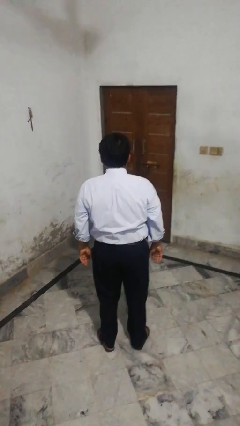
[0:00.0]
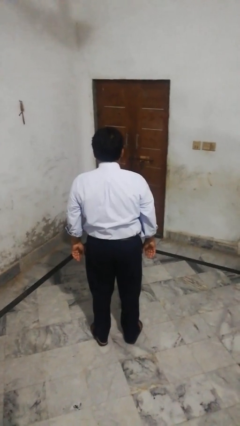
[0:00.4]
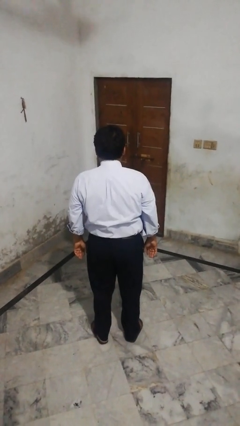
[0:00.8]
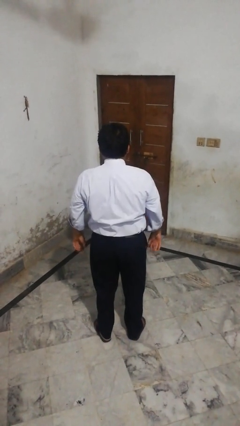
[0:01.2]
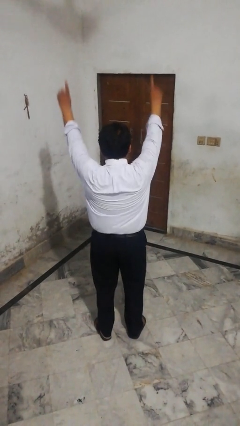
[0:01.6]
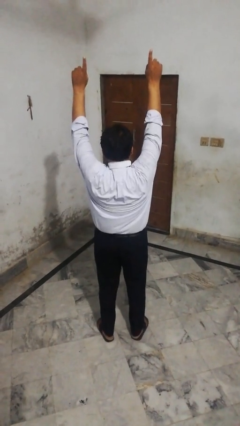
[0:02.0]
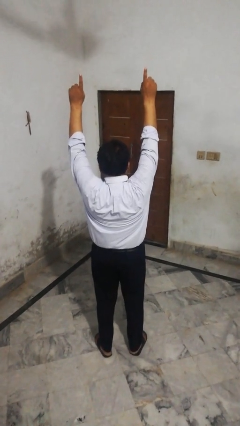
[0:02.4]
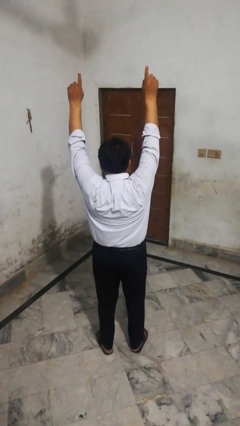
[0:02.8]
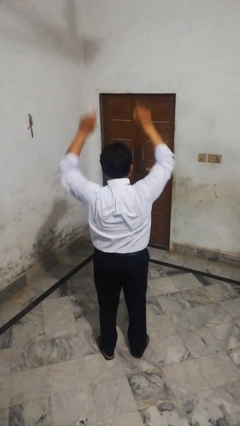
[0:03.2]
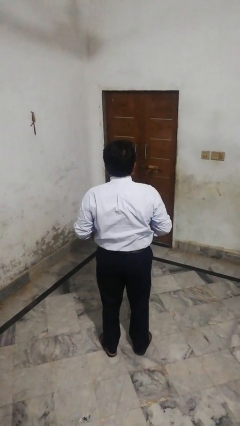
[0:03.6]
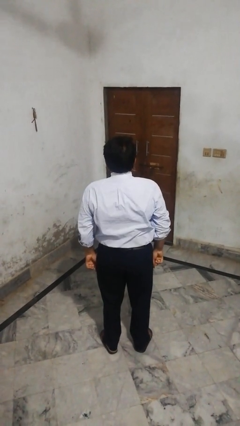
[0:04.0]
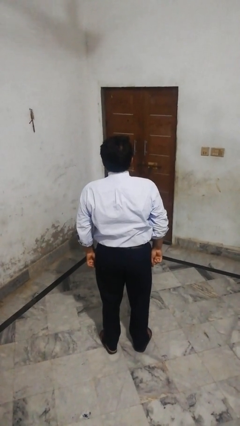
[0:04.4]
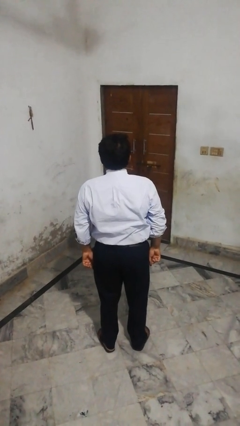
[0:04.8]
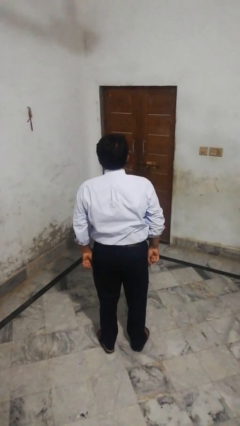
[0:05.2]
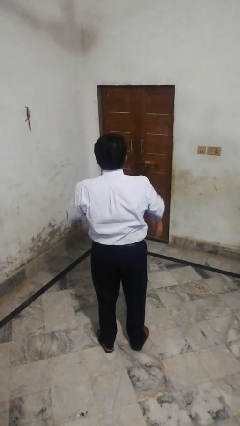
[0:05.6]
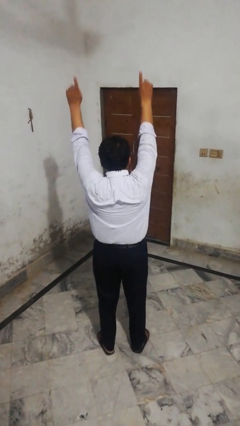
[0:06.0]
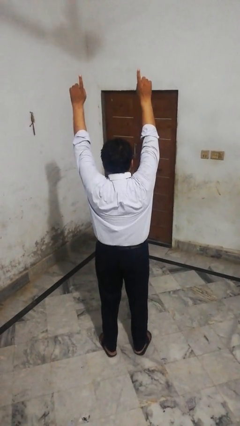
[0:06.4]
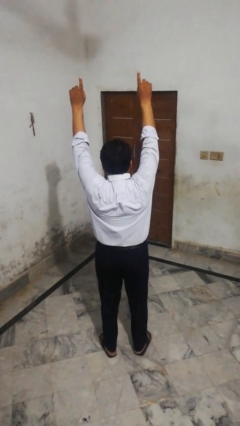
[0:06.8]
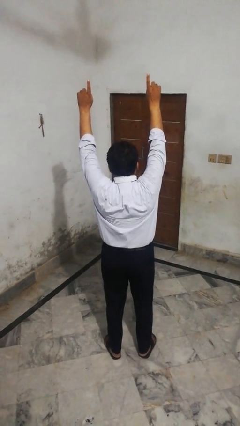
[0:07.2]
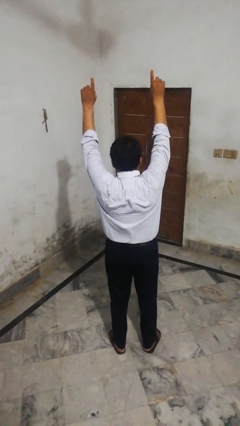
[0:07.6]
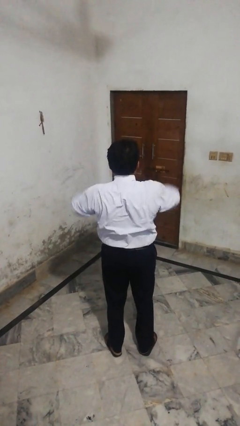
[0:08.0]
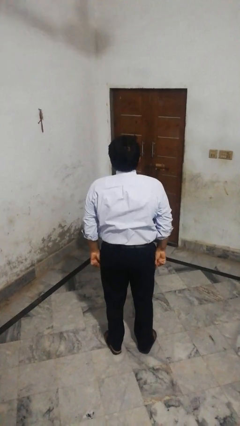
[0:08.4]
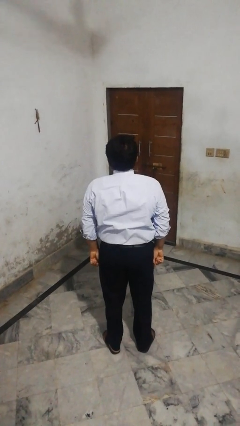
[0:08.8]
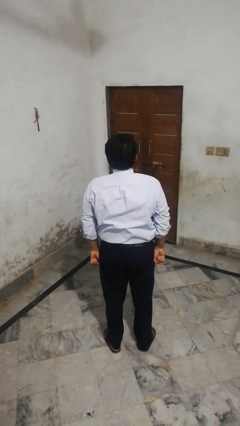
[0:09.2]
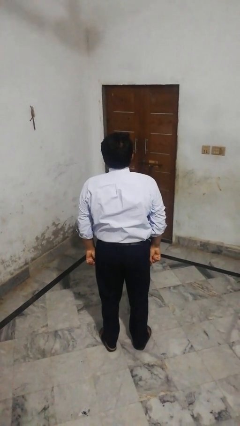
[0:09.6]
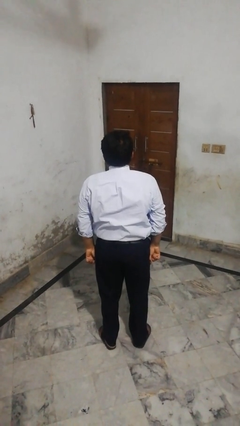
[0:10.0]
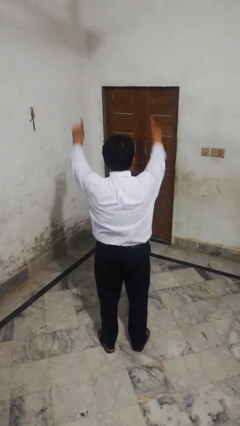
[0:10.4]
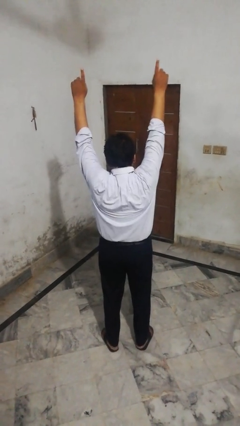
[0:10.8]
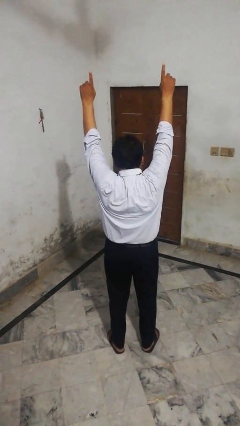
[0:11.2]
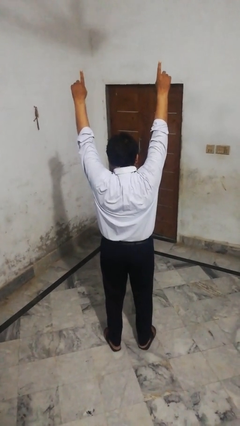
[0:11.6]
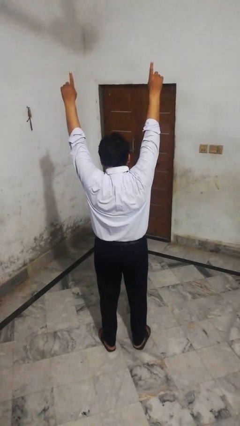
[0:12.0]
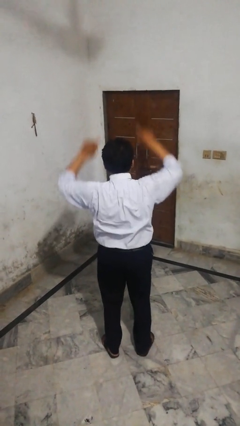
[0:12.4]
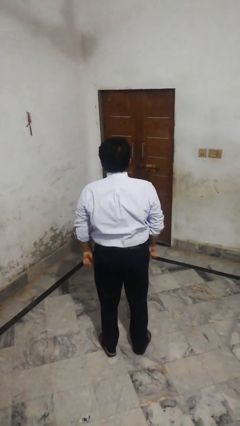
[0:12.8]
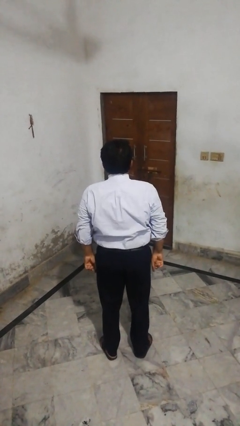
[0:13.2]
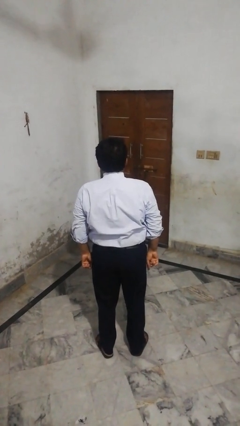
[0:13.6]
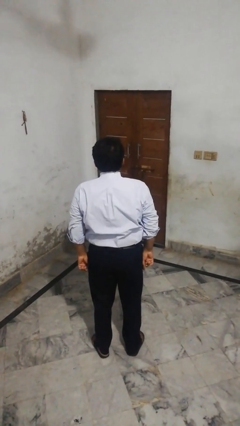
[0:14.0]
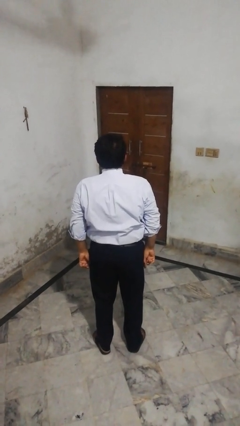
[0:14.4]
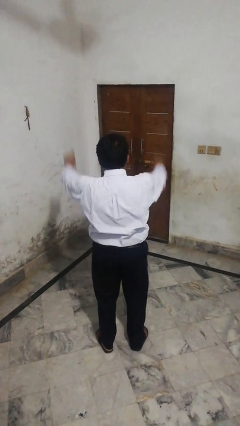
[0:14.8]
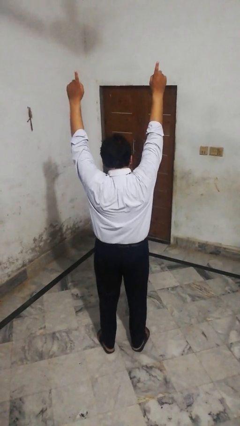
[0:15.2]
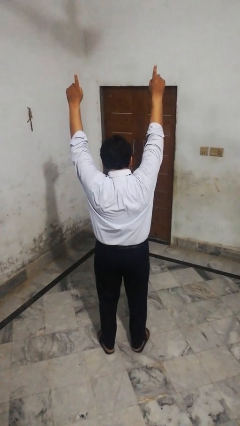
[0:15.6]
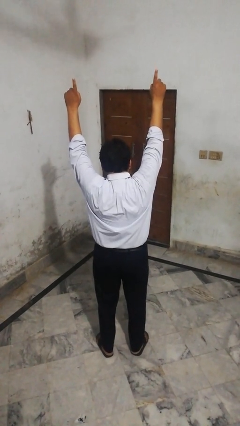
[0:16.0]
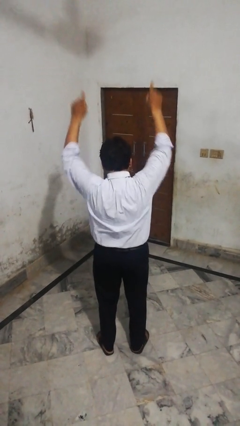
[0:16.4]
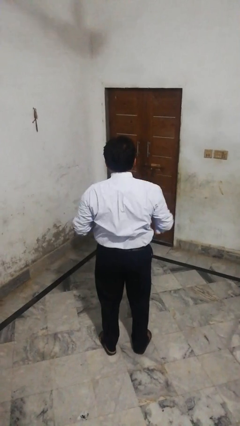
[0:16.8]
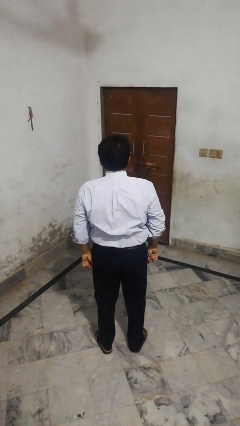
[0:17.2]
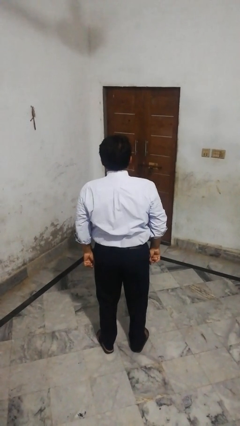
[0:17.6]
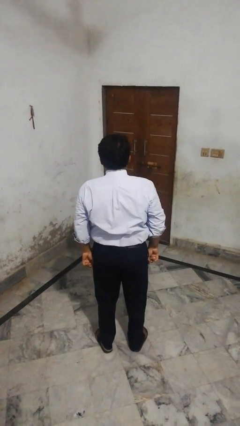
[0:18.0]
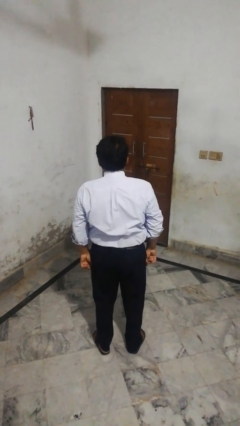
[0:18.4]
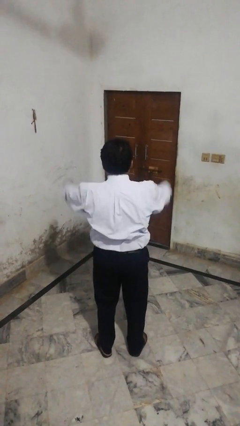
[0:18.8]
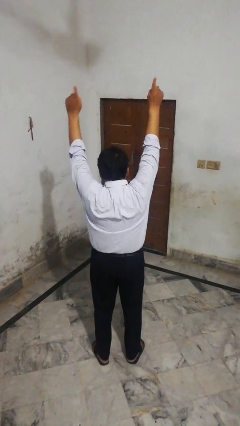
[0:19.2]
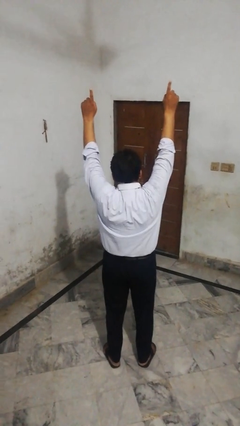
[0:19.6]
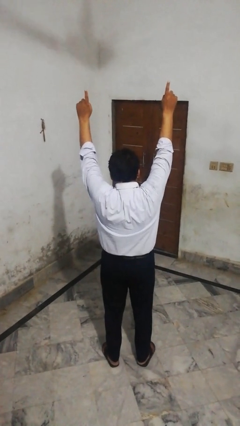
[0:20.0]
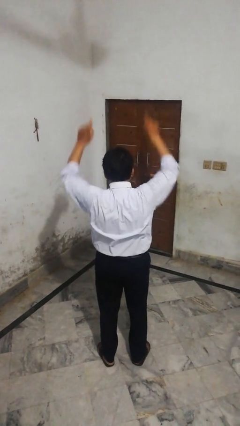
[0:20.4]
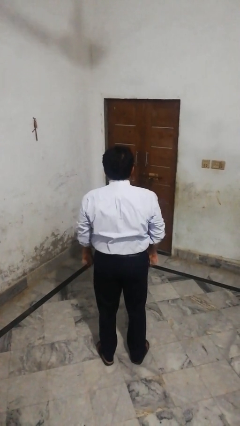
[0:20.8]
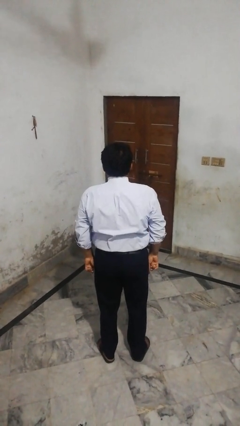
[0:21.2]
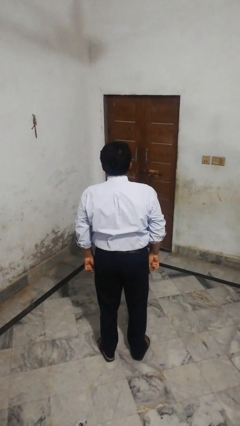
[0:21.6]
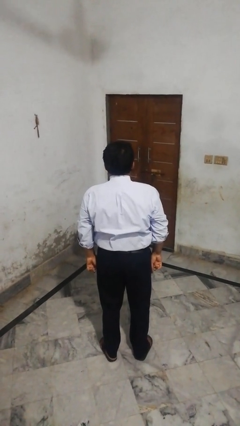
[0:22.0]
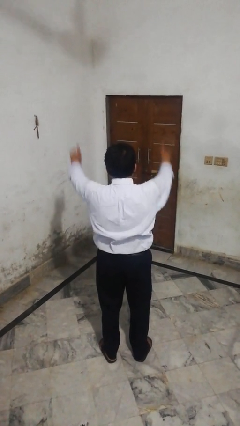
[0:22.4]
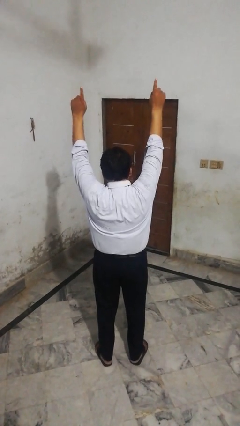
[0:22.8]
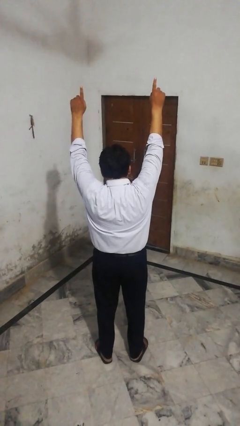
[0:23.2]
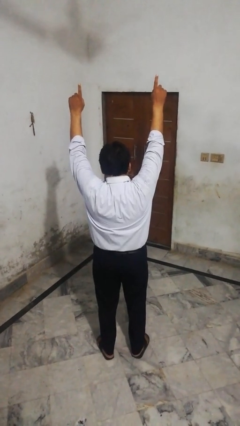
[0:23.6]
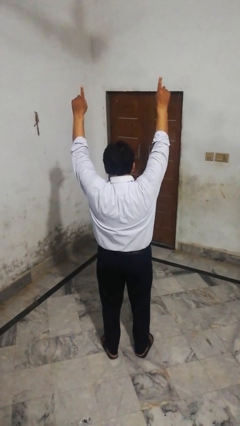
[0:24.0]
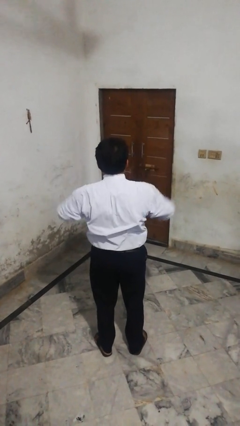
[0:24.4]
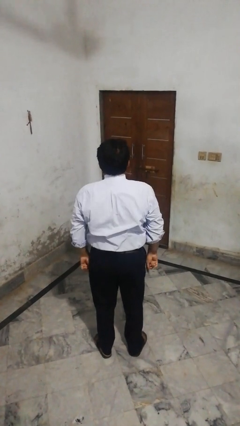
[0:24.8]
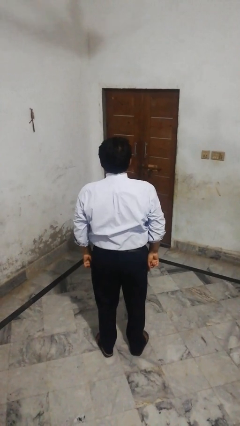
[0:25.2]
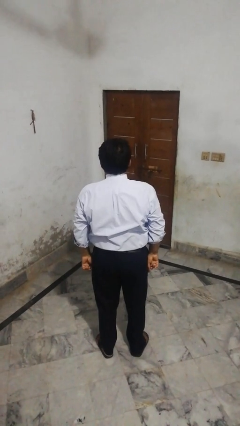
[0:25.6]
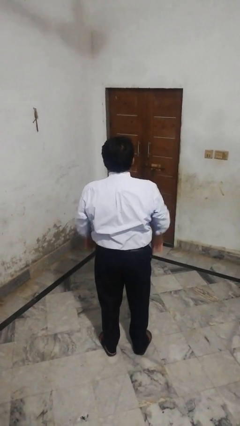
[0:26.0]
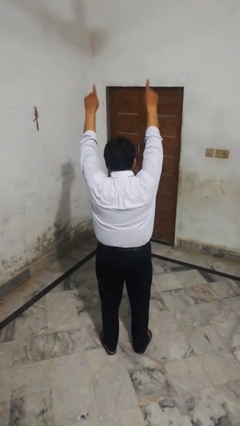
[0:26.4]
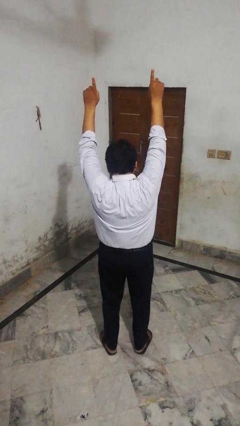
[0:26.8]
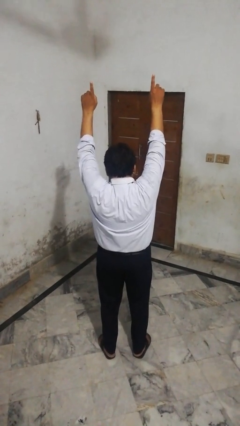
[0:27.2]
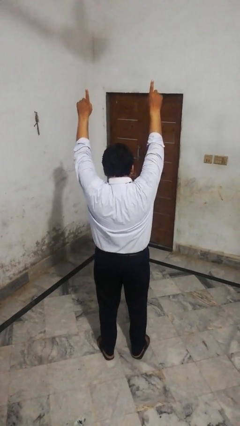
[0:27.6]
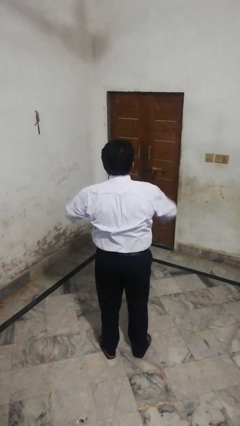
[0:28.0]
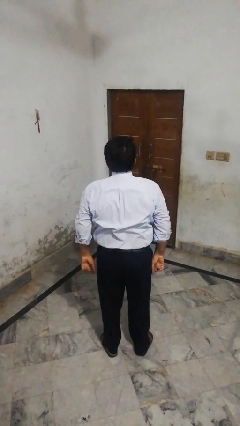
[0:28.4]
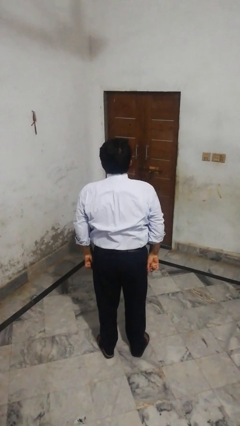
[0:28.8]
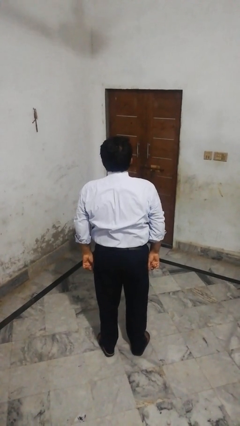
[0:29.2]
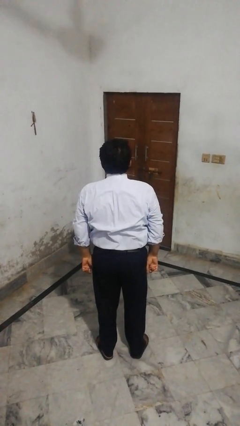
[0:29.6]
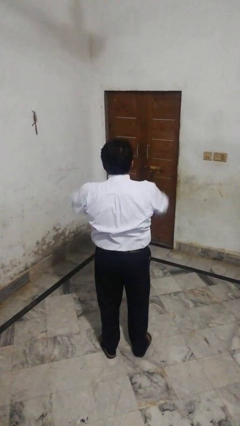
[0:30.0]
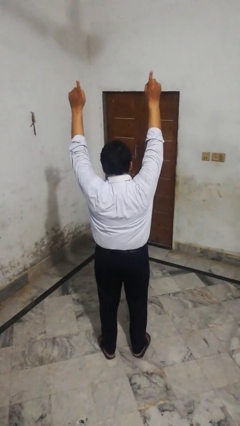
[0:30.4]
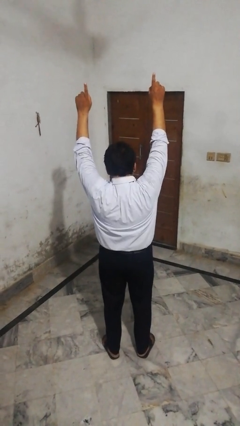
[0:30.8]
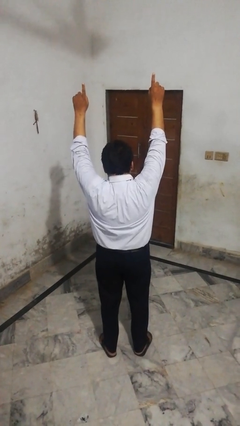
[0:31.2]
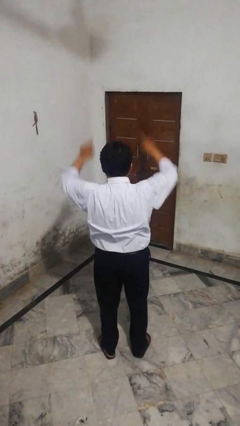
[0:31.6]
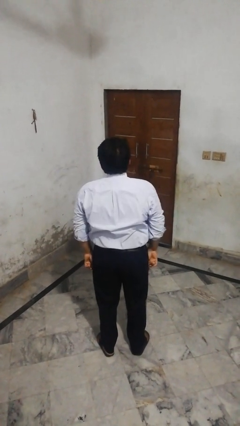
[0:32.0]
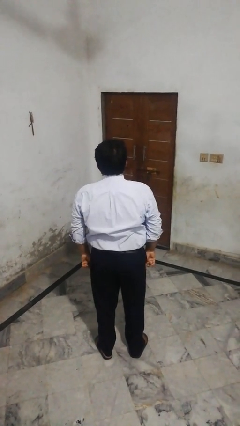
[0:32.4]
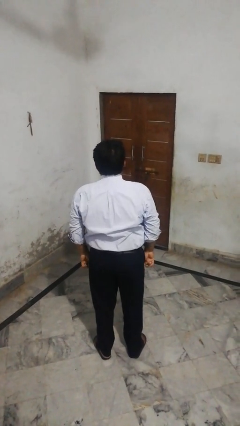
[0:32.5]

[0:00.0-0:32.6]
person gestures number one

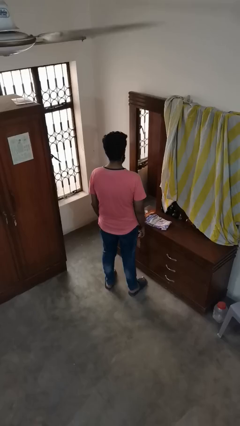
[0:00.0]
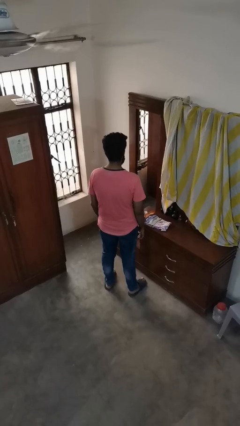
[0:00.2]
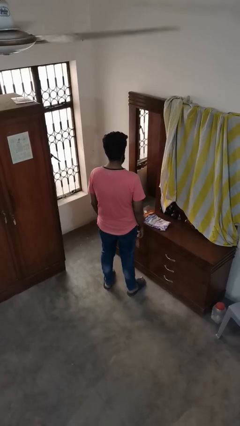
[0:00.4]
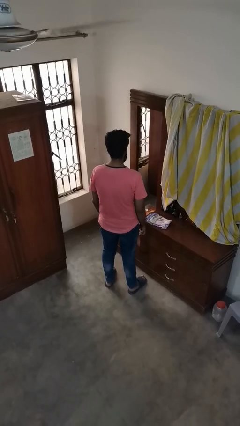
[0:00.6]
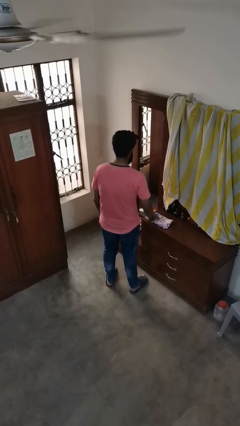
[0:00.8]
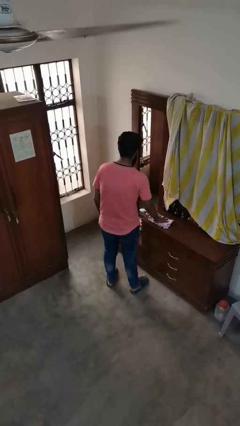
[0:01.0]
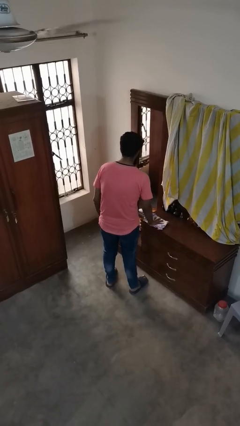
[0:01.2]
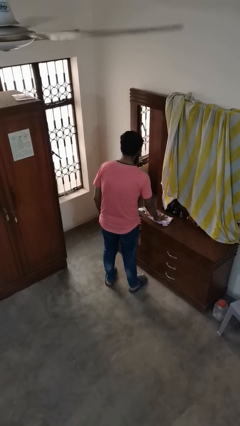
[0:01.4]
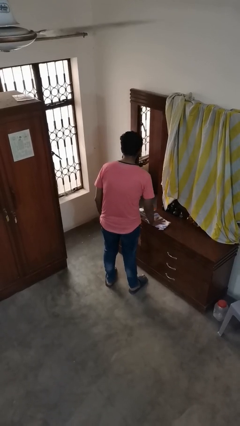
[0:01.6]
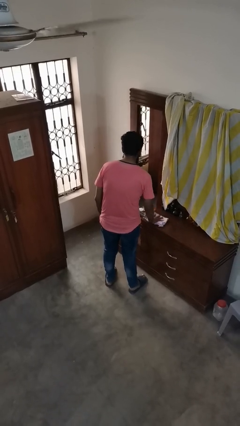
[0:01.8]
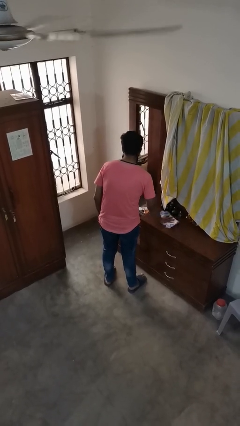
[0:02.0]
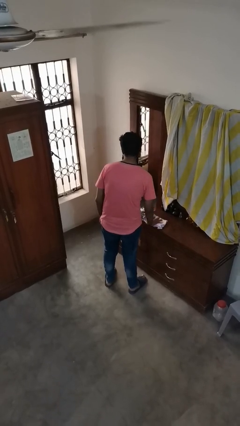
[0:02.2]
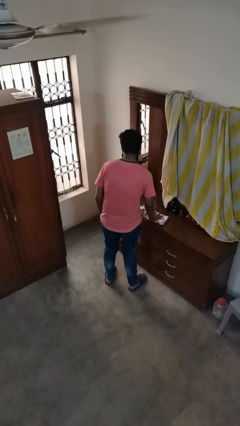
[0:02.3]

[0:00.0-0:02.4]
person cleans table with rag
